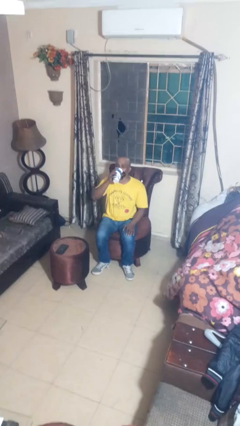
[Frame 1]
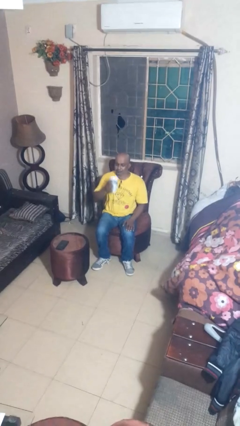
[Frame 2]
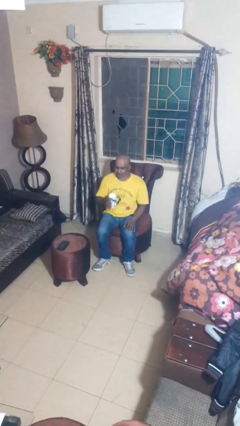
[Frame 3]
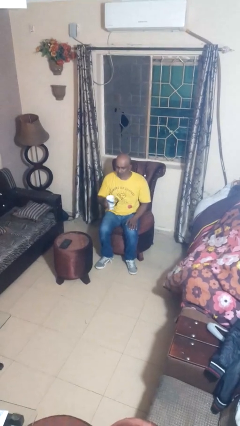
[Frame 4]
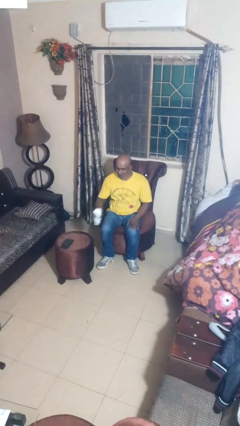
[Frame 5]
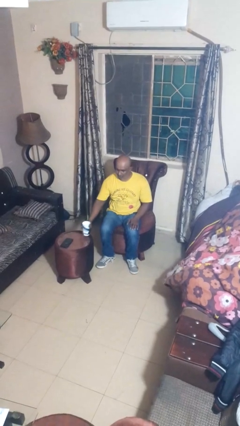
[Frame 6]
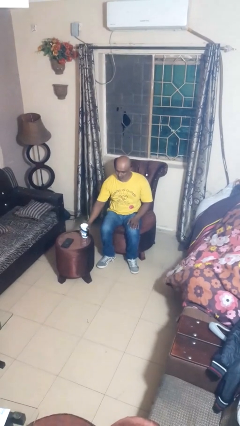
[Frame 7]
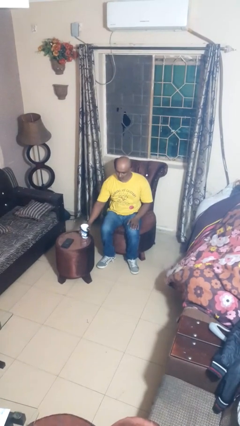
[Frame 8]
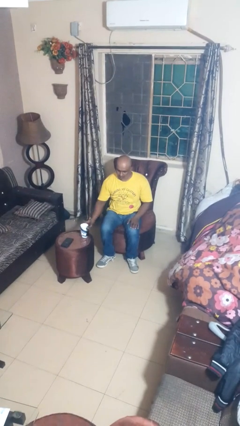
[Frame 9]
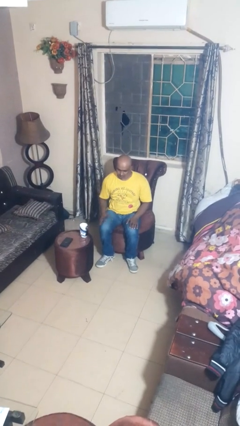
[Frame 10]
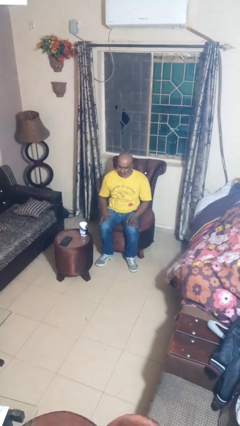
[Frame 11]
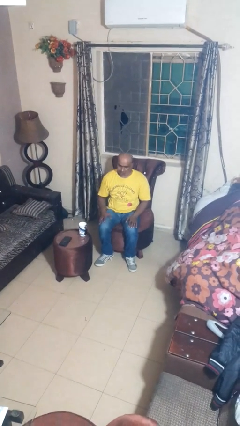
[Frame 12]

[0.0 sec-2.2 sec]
person puts down object on table

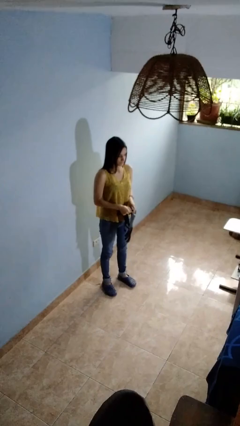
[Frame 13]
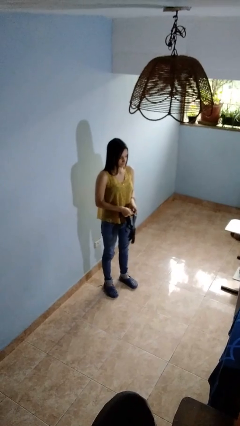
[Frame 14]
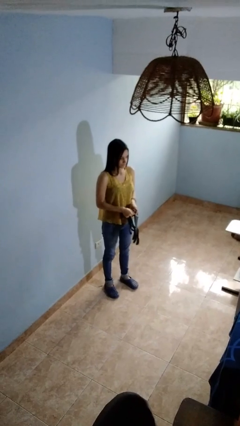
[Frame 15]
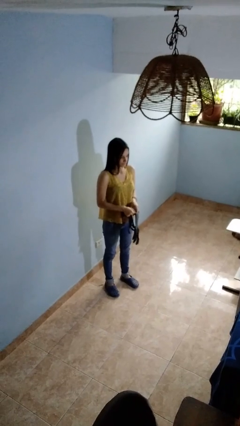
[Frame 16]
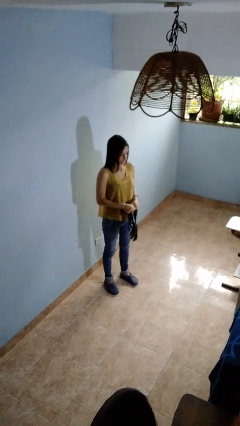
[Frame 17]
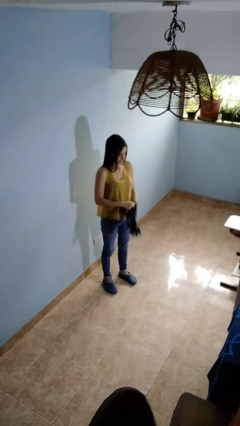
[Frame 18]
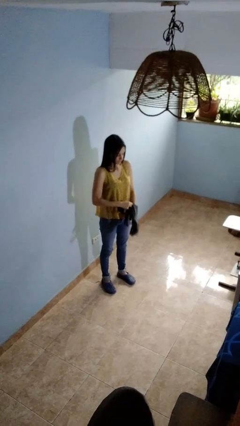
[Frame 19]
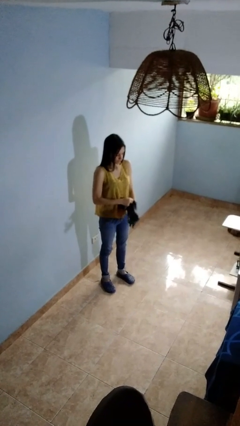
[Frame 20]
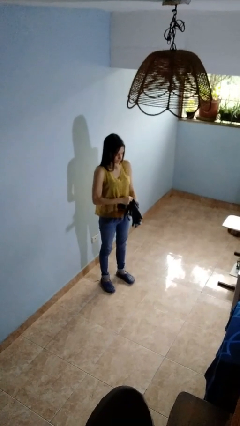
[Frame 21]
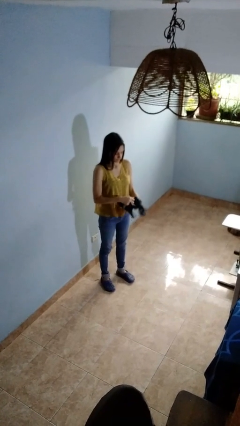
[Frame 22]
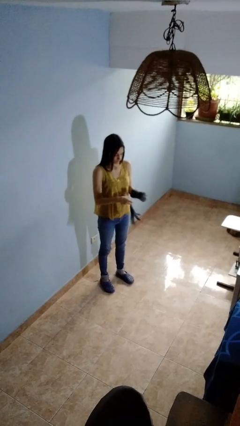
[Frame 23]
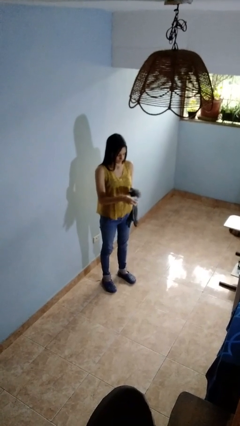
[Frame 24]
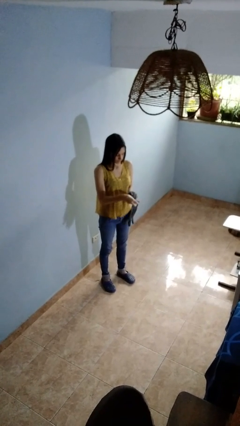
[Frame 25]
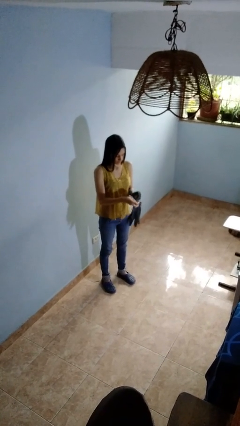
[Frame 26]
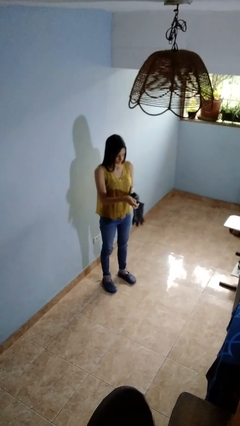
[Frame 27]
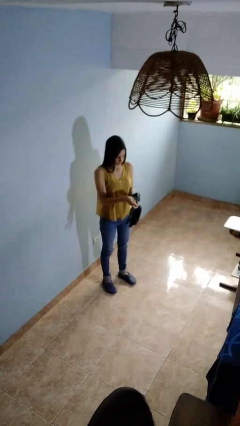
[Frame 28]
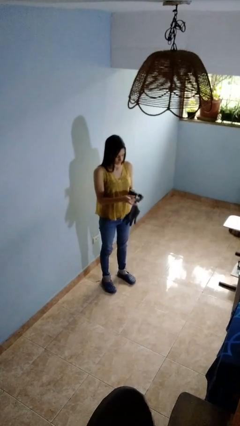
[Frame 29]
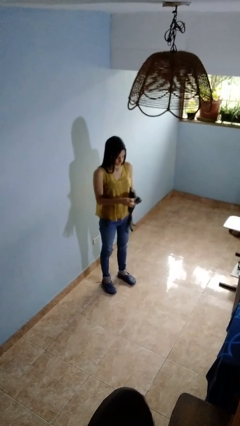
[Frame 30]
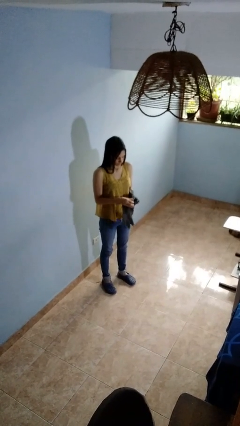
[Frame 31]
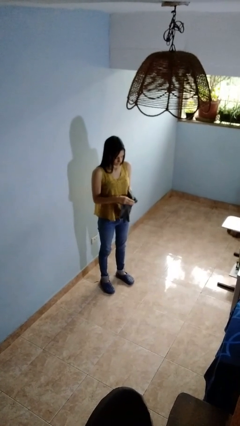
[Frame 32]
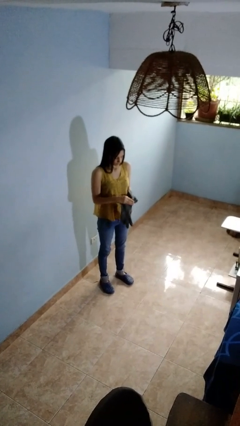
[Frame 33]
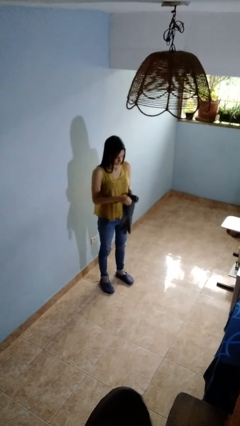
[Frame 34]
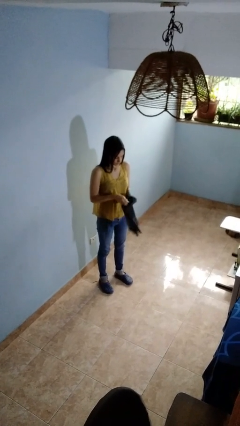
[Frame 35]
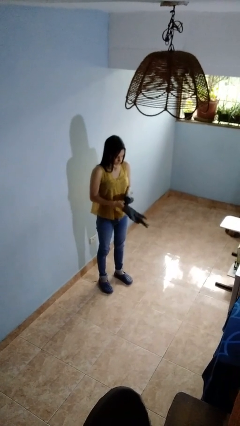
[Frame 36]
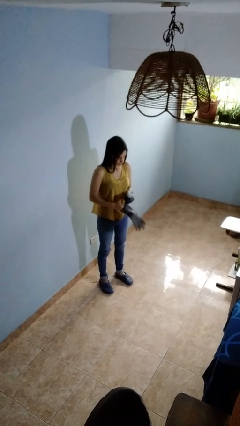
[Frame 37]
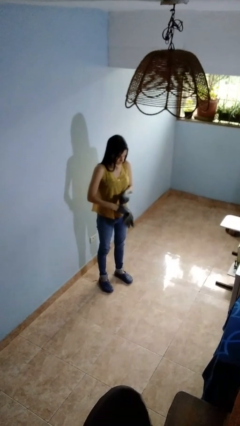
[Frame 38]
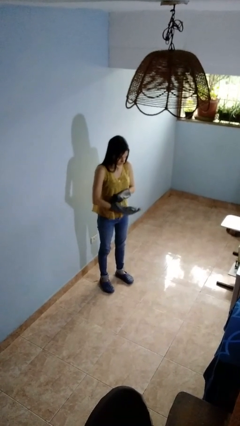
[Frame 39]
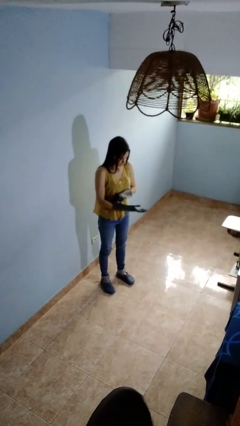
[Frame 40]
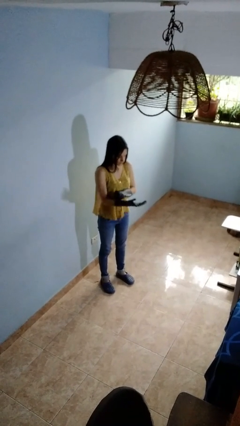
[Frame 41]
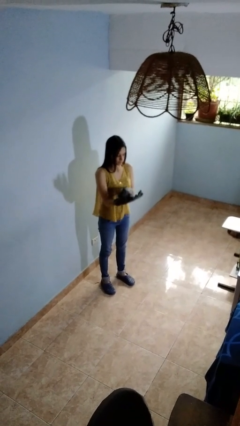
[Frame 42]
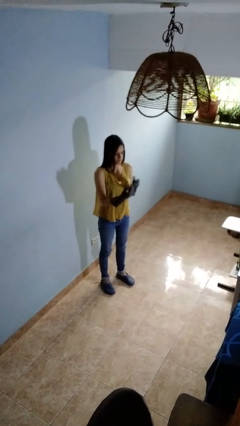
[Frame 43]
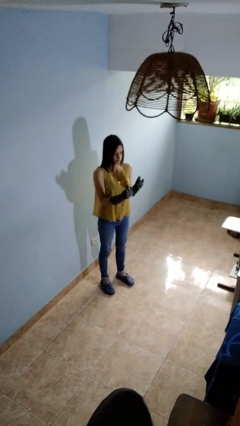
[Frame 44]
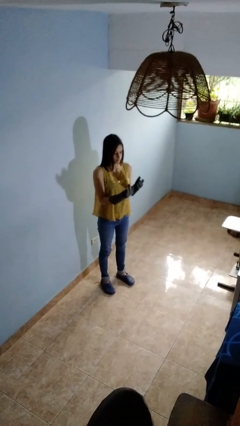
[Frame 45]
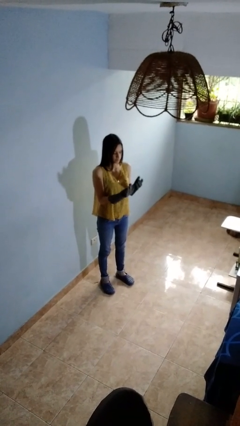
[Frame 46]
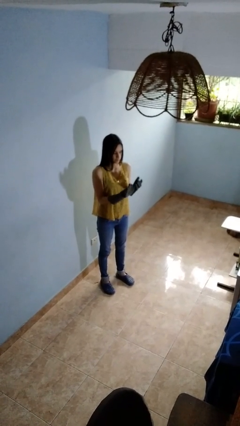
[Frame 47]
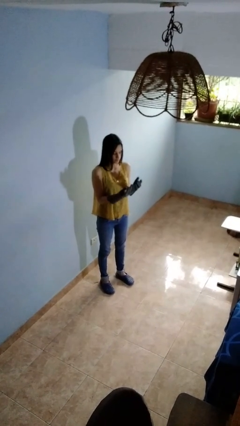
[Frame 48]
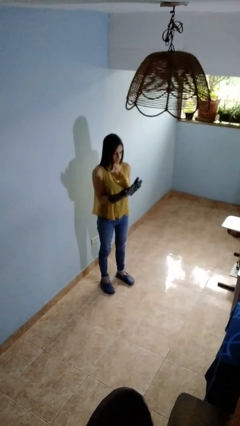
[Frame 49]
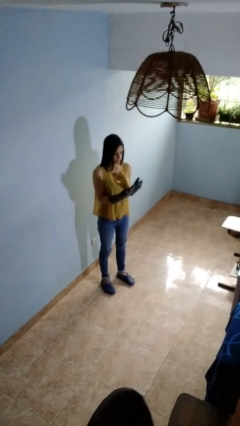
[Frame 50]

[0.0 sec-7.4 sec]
person puts on gloves

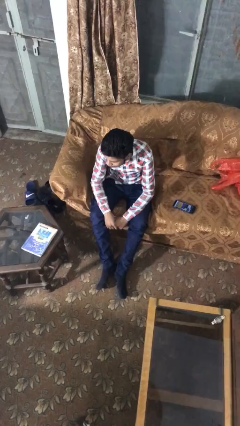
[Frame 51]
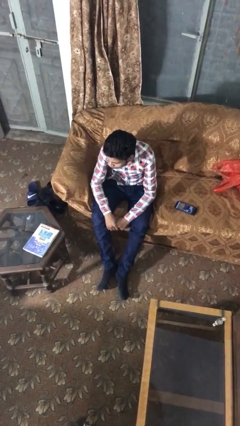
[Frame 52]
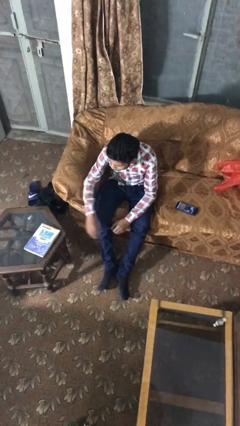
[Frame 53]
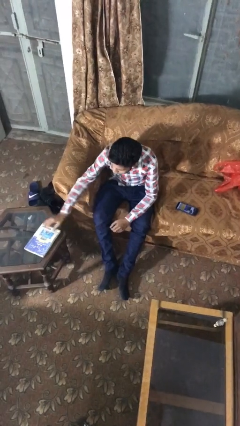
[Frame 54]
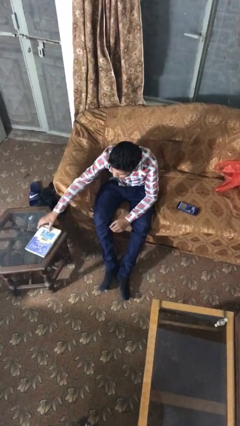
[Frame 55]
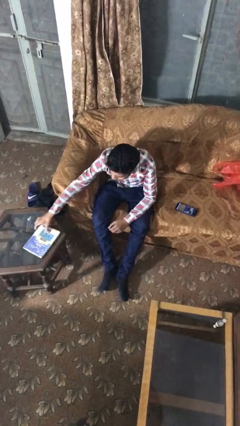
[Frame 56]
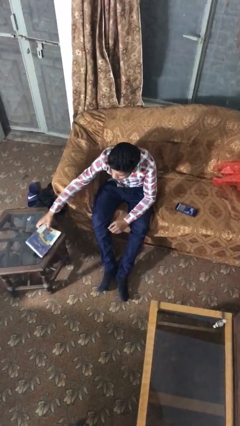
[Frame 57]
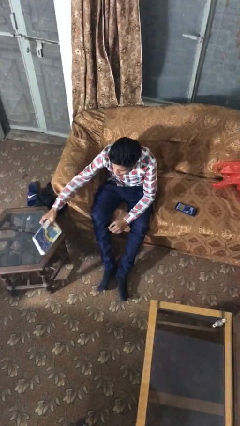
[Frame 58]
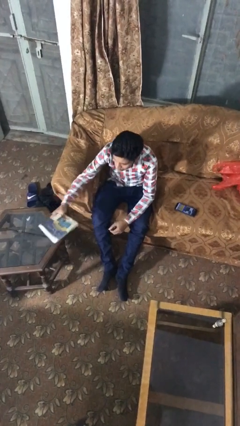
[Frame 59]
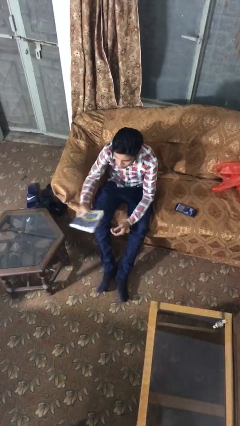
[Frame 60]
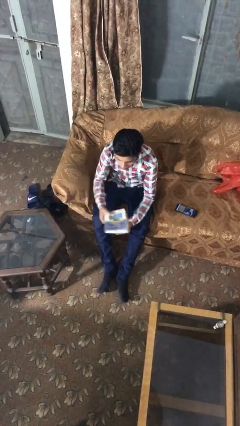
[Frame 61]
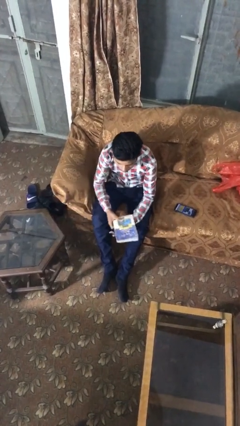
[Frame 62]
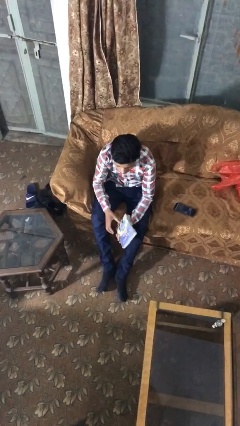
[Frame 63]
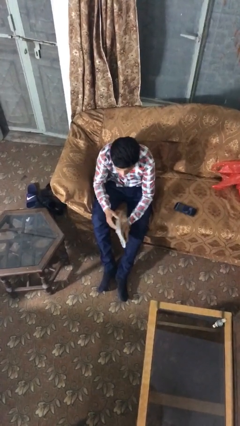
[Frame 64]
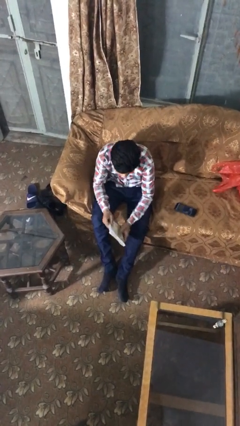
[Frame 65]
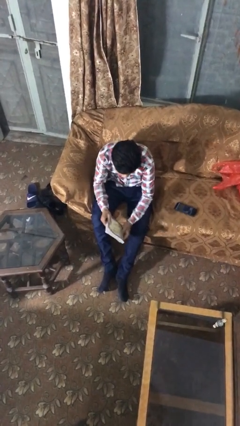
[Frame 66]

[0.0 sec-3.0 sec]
person picks up object from table

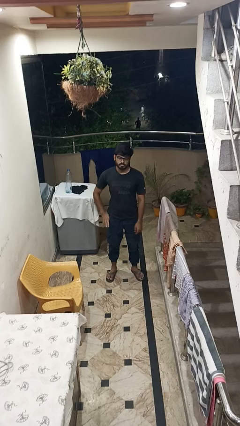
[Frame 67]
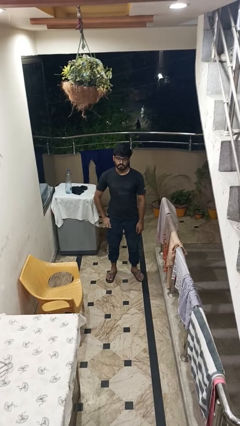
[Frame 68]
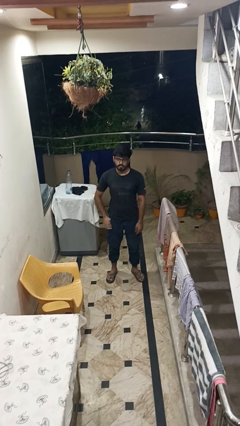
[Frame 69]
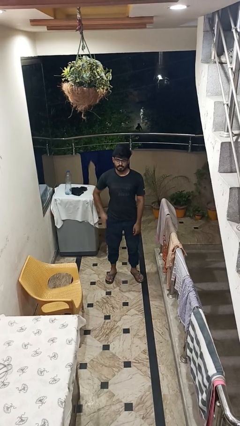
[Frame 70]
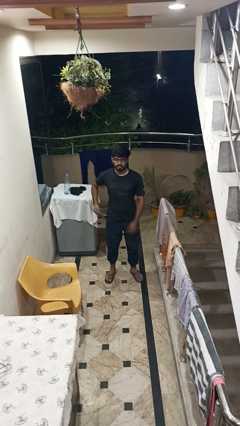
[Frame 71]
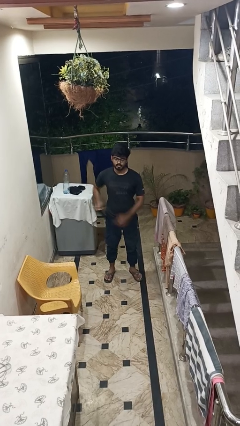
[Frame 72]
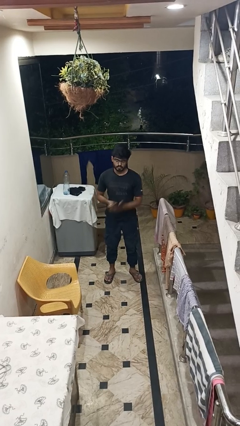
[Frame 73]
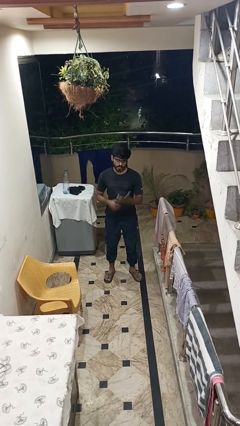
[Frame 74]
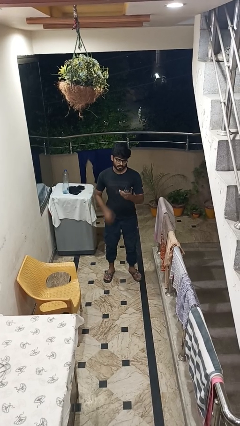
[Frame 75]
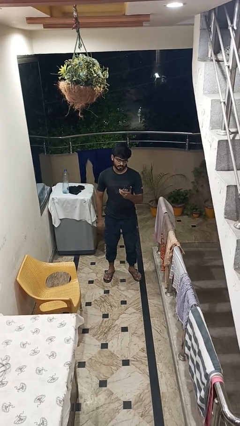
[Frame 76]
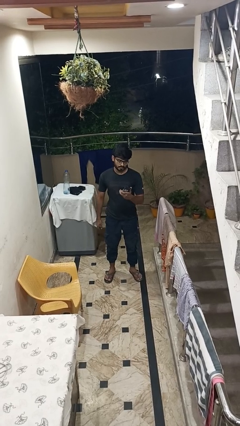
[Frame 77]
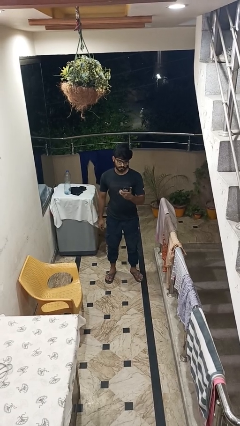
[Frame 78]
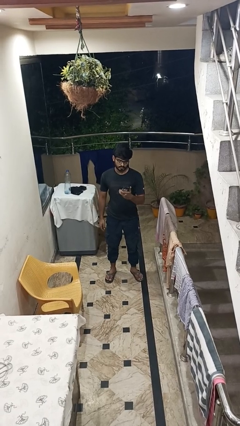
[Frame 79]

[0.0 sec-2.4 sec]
person takes phone from pocket

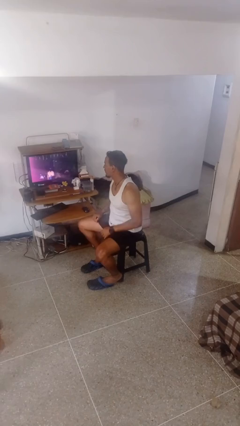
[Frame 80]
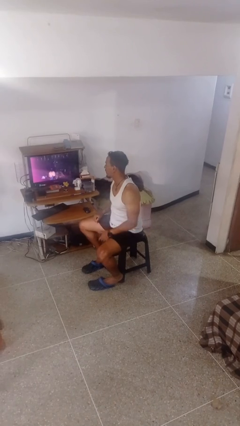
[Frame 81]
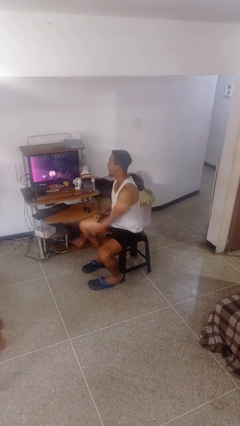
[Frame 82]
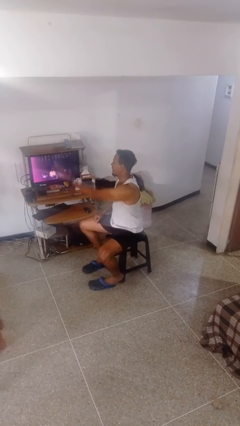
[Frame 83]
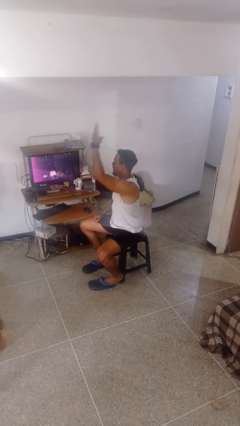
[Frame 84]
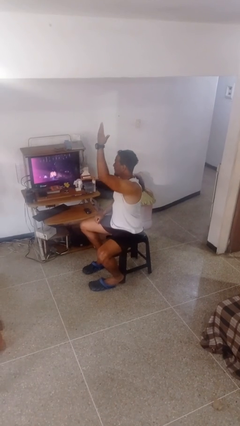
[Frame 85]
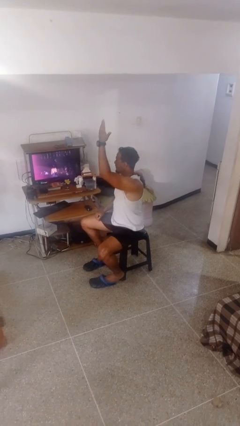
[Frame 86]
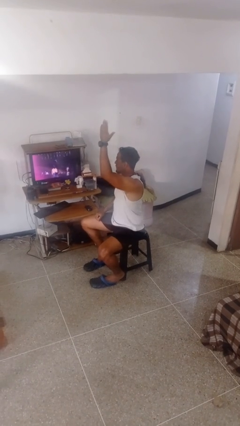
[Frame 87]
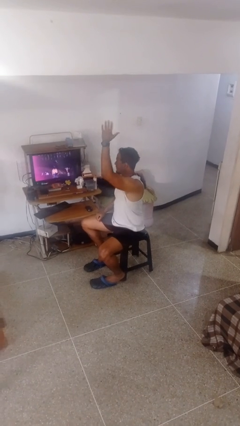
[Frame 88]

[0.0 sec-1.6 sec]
person gestures swipe up

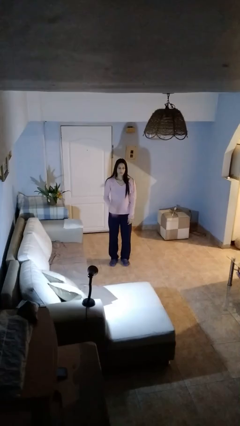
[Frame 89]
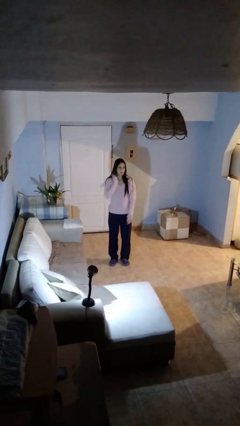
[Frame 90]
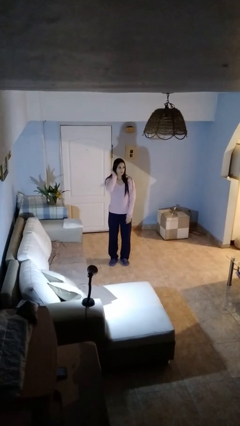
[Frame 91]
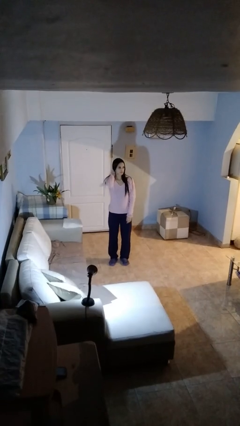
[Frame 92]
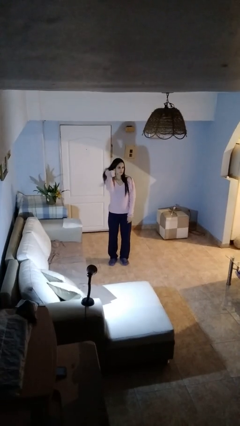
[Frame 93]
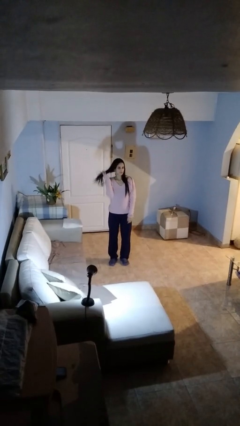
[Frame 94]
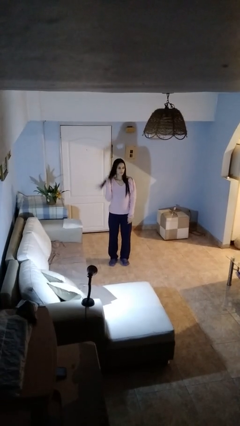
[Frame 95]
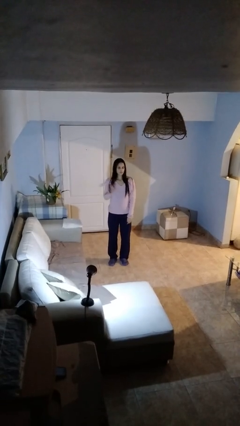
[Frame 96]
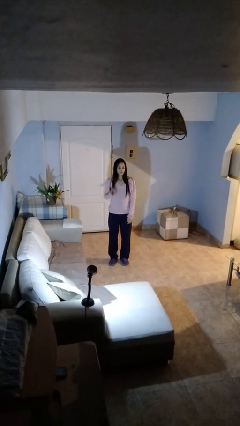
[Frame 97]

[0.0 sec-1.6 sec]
person strokes hair
